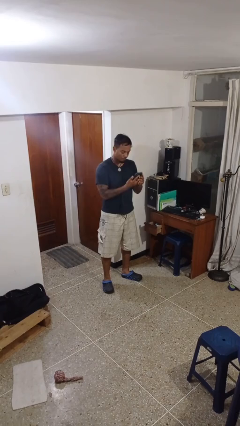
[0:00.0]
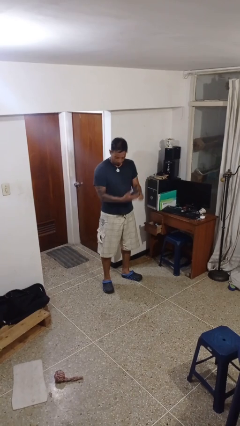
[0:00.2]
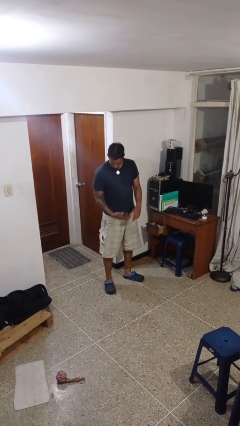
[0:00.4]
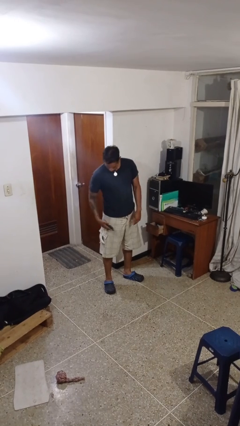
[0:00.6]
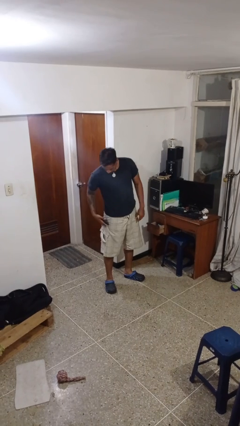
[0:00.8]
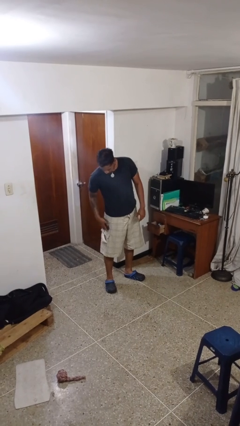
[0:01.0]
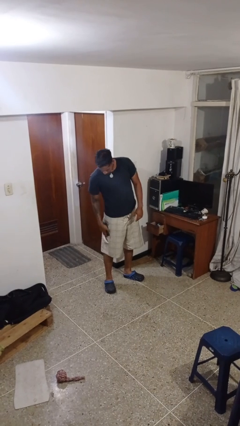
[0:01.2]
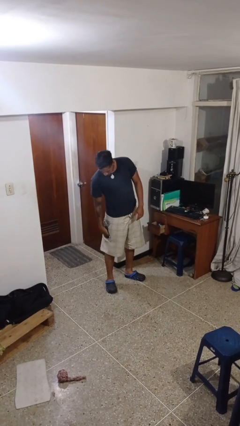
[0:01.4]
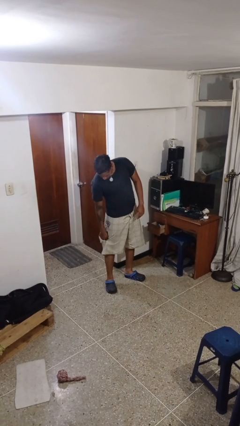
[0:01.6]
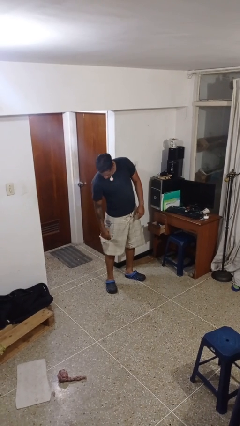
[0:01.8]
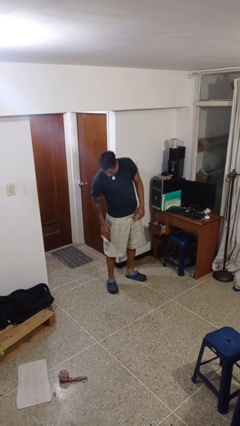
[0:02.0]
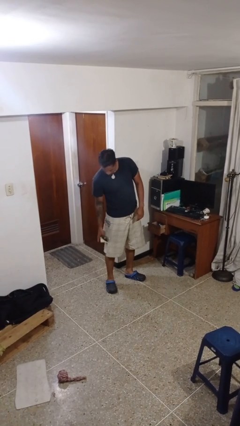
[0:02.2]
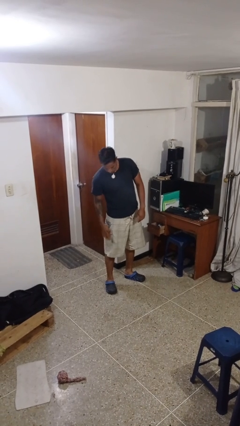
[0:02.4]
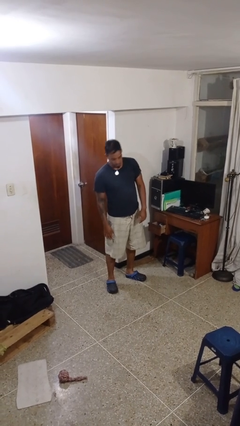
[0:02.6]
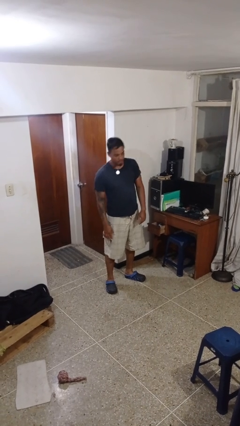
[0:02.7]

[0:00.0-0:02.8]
person puts phone into pocket

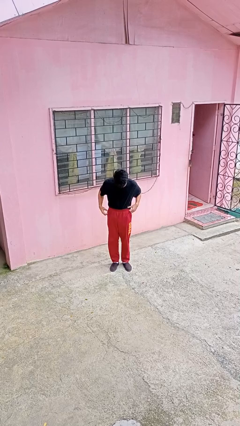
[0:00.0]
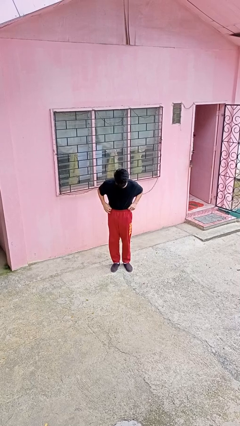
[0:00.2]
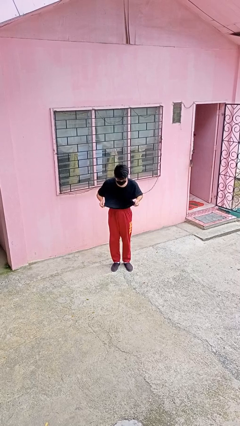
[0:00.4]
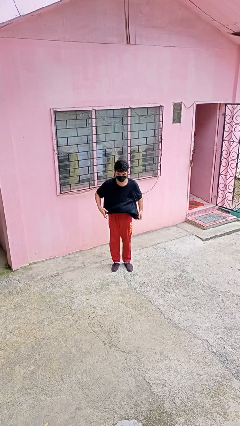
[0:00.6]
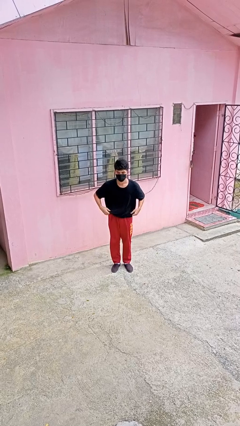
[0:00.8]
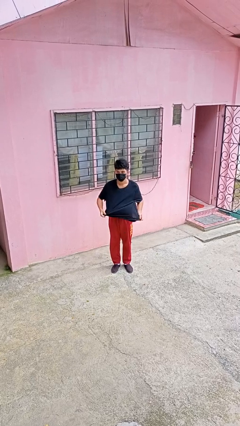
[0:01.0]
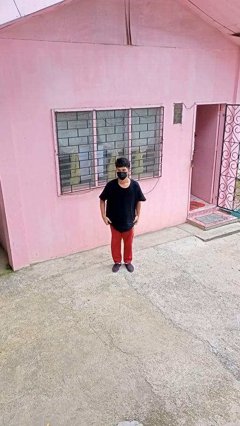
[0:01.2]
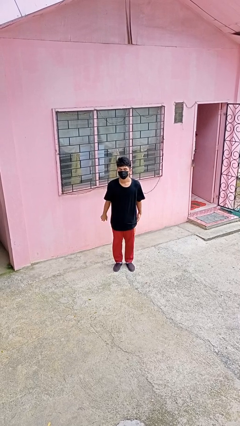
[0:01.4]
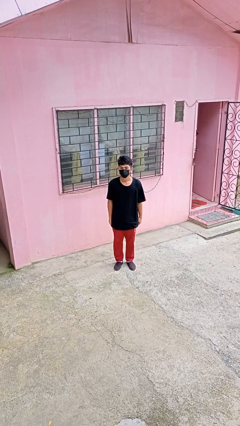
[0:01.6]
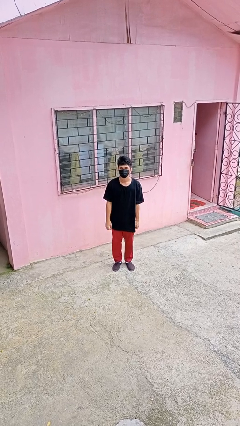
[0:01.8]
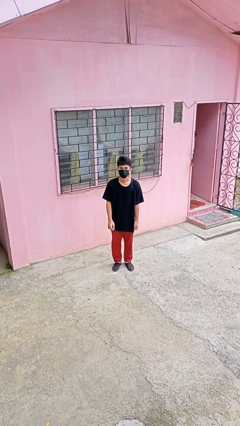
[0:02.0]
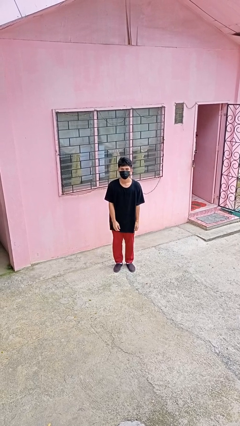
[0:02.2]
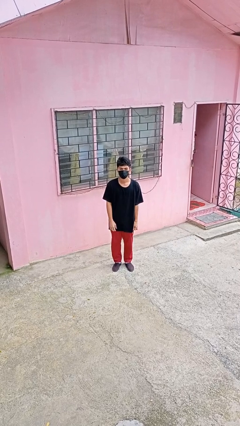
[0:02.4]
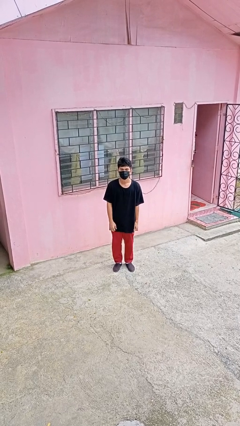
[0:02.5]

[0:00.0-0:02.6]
person untucks shirt

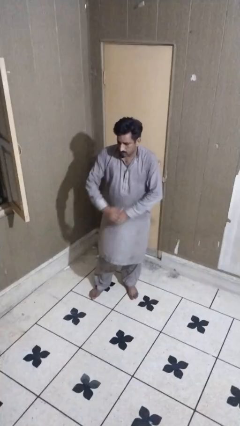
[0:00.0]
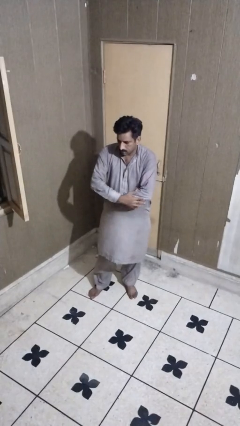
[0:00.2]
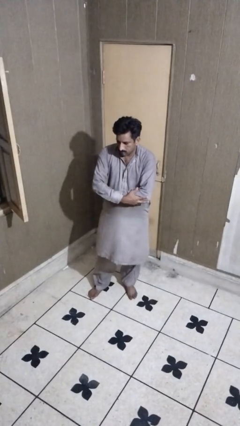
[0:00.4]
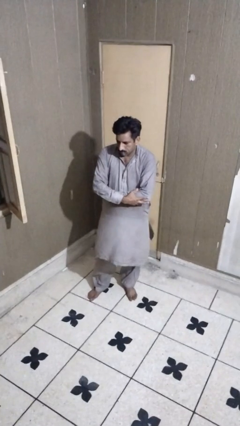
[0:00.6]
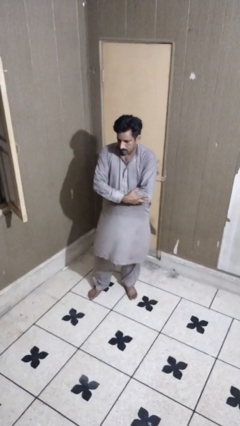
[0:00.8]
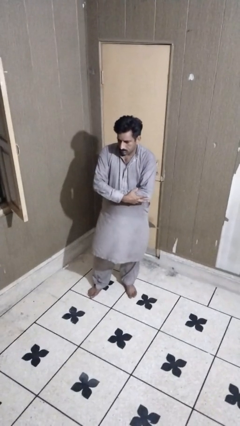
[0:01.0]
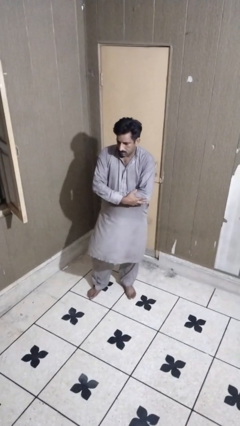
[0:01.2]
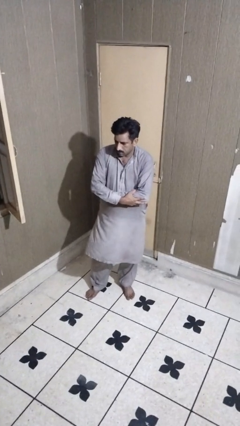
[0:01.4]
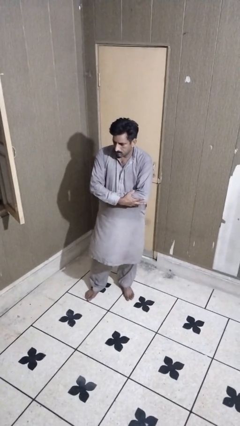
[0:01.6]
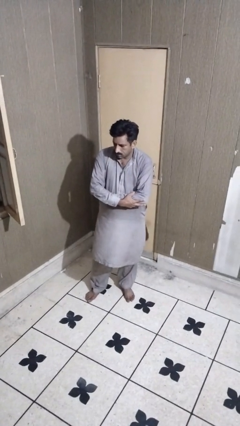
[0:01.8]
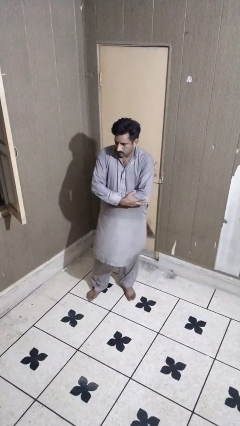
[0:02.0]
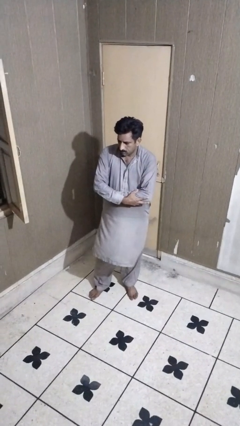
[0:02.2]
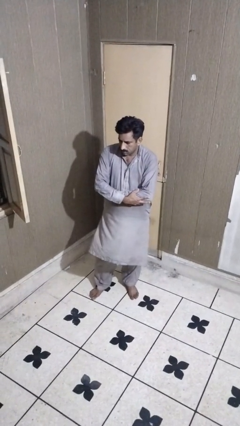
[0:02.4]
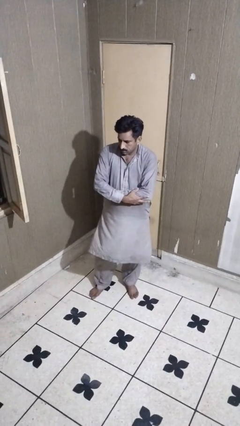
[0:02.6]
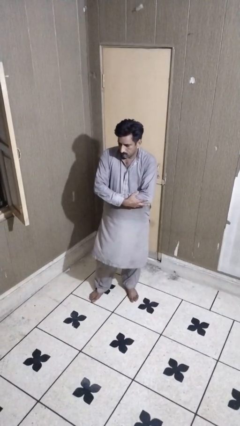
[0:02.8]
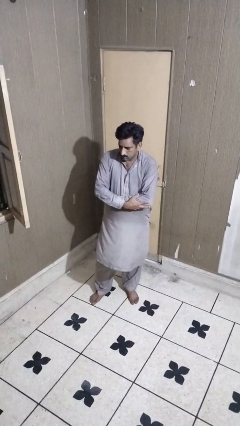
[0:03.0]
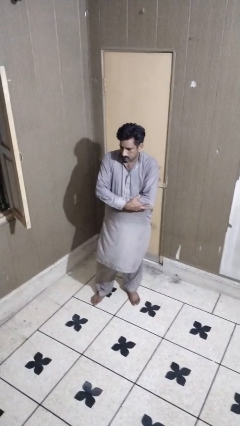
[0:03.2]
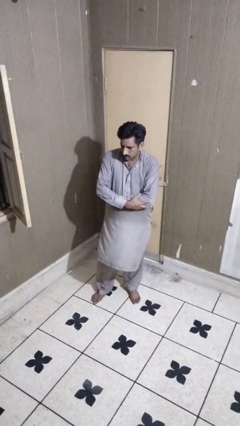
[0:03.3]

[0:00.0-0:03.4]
person crosses arms

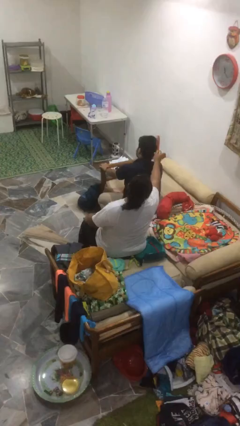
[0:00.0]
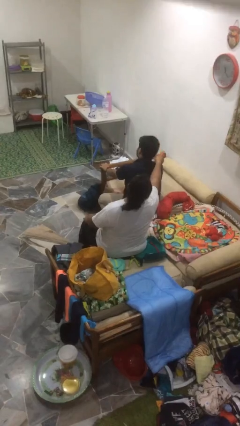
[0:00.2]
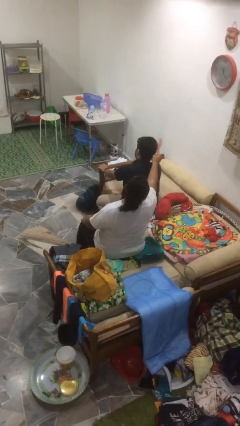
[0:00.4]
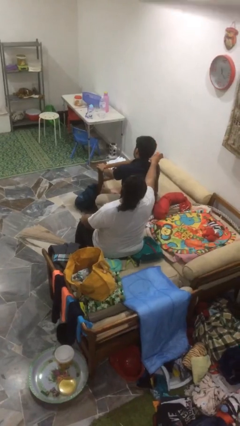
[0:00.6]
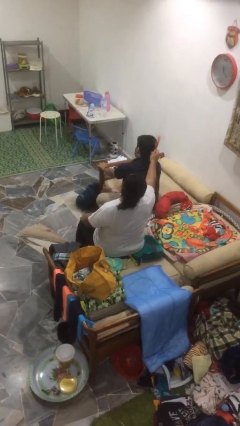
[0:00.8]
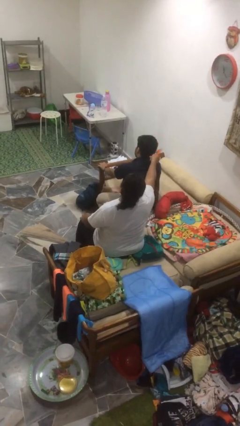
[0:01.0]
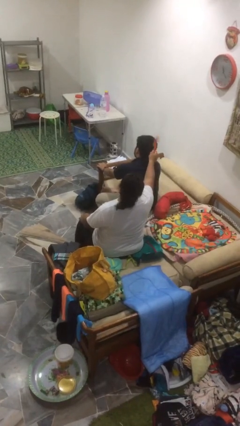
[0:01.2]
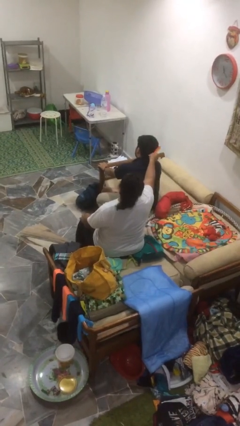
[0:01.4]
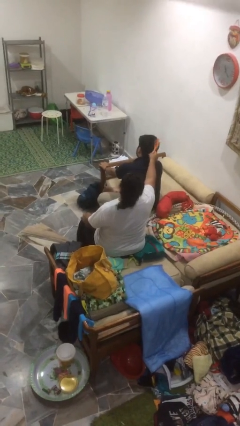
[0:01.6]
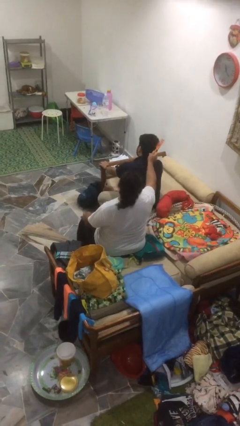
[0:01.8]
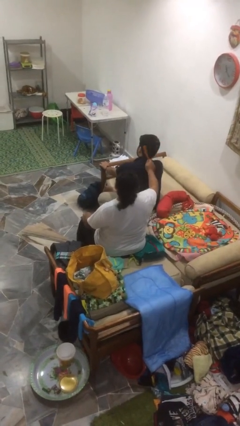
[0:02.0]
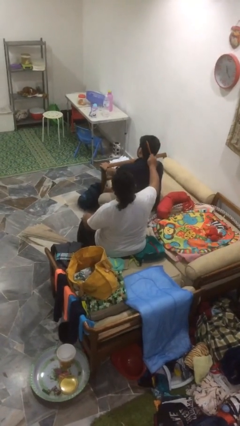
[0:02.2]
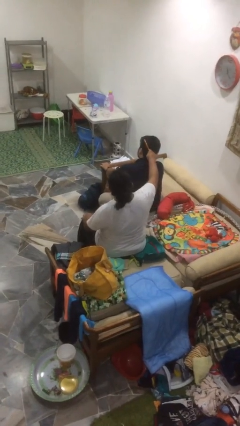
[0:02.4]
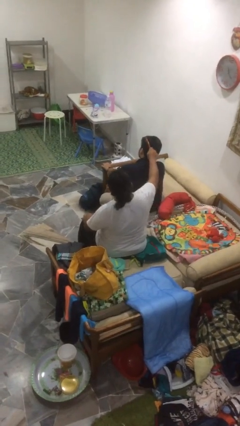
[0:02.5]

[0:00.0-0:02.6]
person brushes hair of person

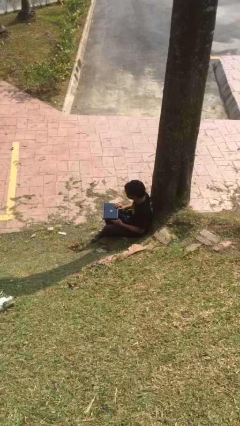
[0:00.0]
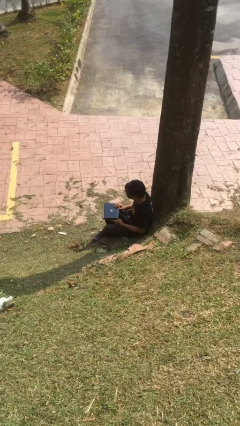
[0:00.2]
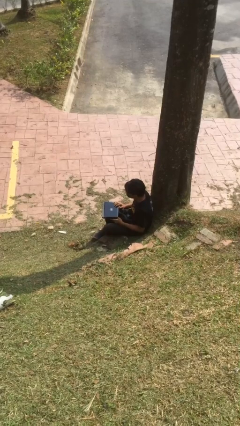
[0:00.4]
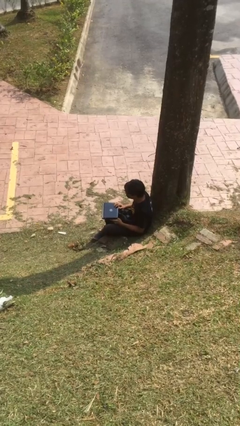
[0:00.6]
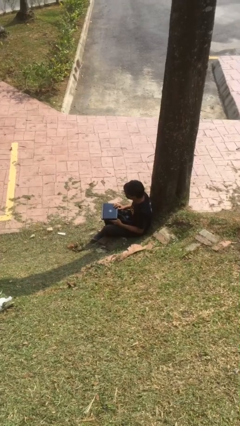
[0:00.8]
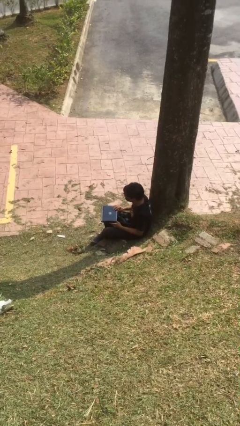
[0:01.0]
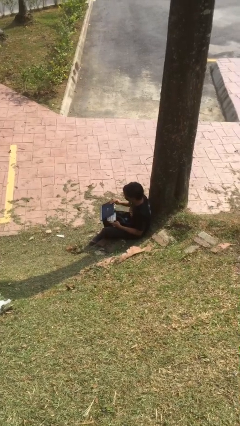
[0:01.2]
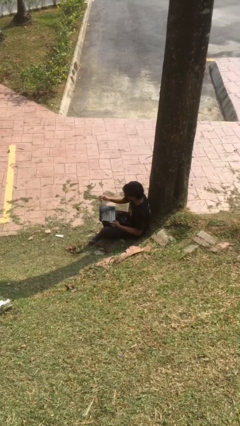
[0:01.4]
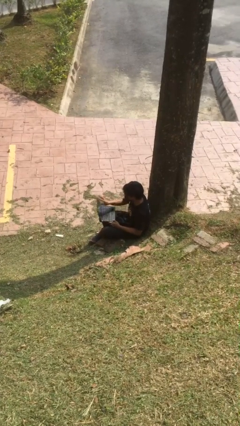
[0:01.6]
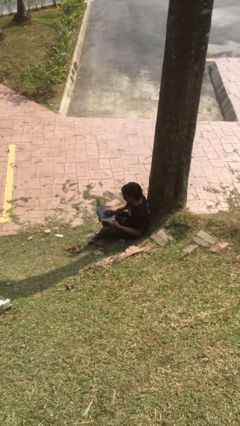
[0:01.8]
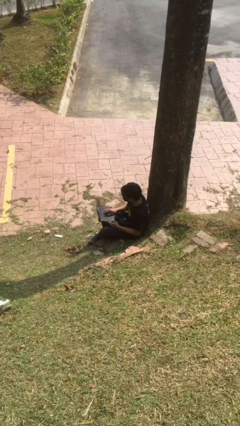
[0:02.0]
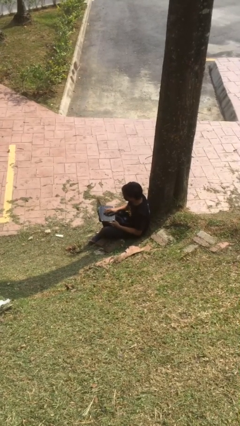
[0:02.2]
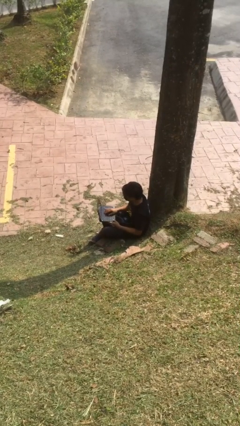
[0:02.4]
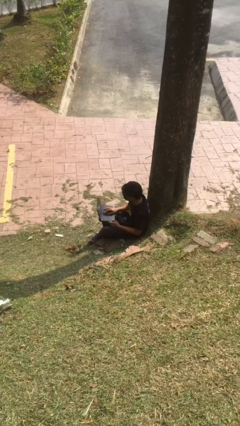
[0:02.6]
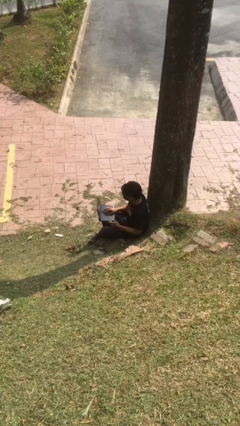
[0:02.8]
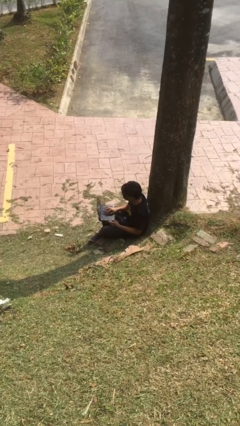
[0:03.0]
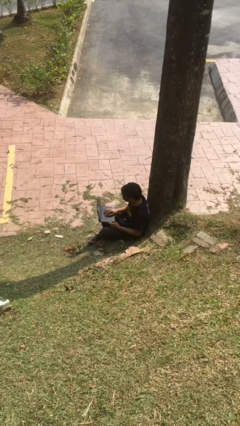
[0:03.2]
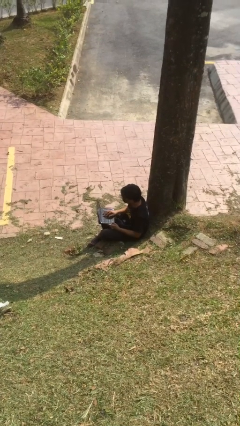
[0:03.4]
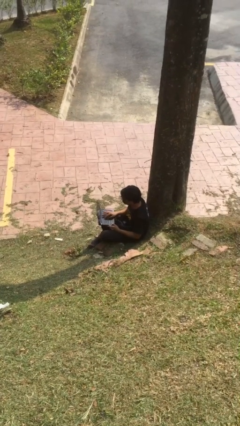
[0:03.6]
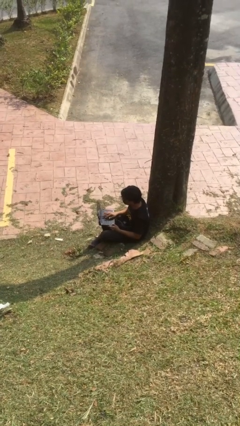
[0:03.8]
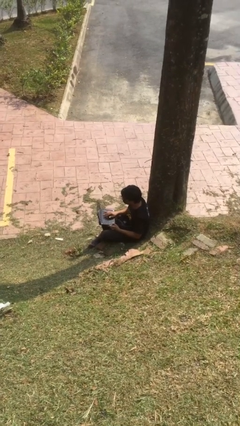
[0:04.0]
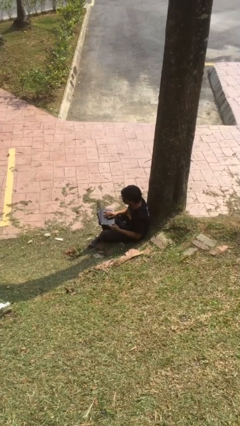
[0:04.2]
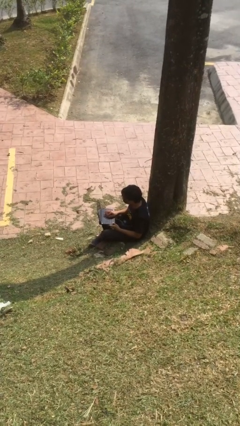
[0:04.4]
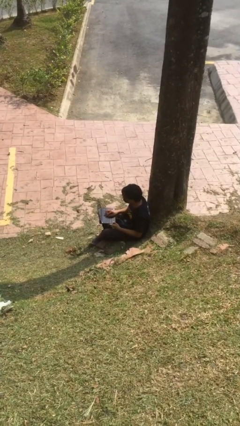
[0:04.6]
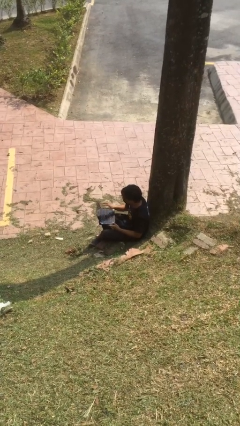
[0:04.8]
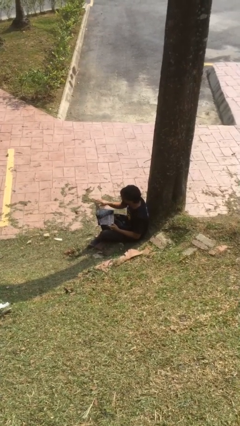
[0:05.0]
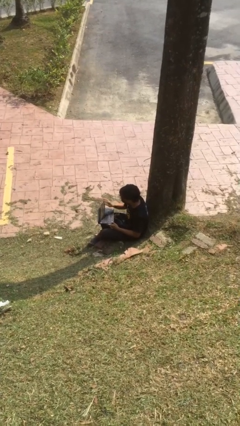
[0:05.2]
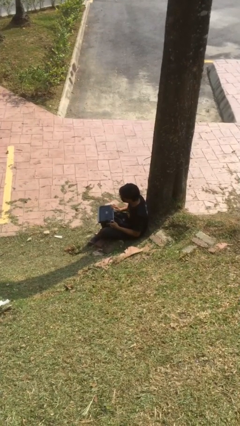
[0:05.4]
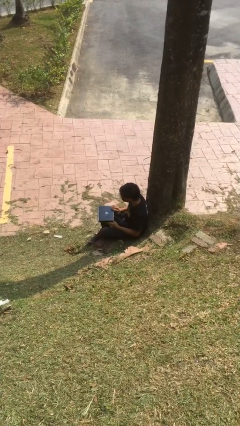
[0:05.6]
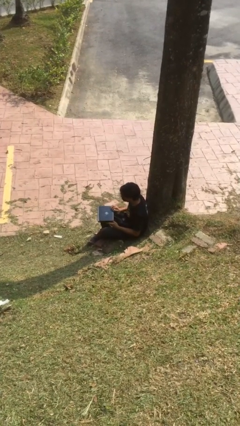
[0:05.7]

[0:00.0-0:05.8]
person interacts with laptop
